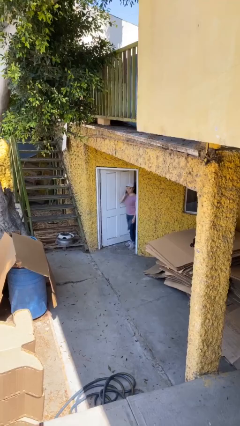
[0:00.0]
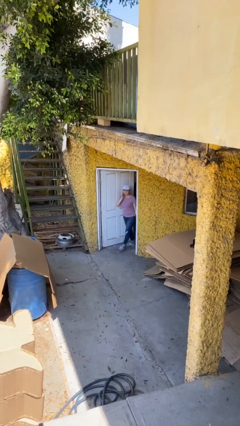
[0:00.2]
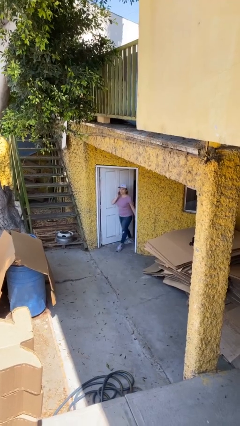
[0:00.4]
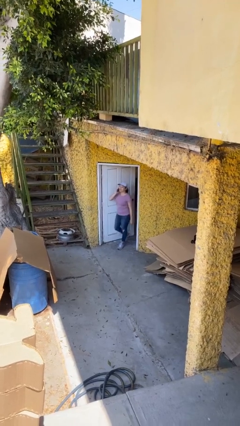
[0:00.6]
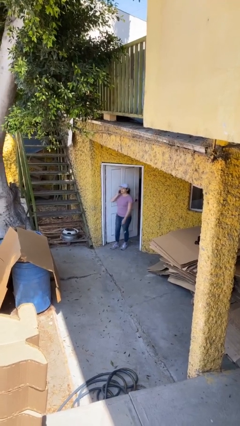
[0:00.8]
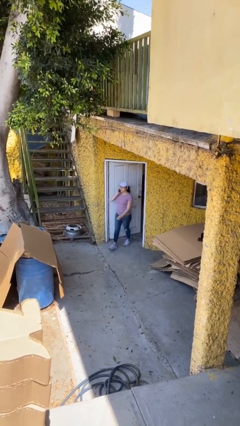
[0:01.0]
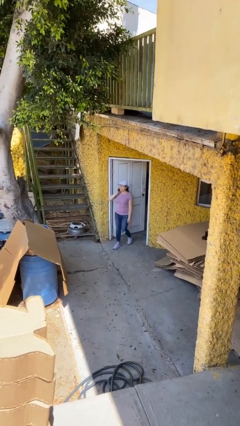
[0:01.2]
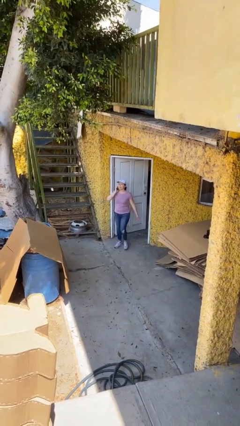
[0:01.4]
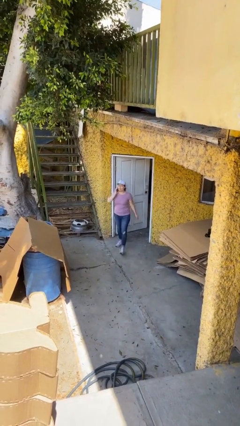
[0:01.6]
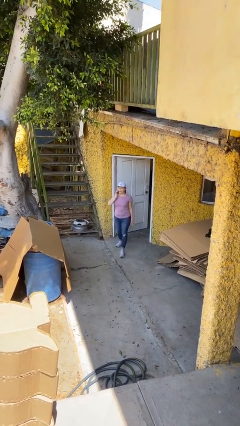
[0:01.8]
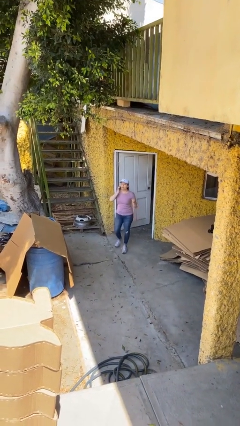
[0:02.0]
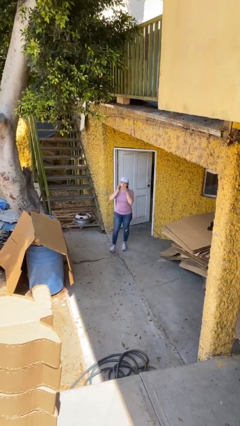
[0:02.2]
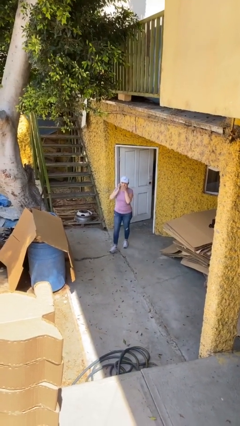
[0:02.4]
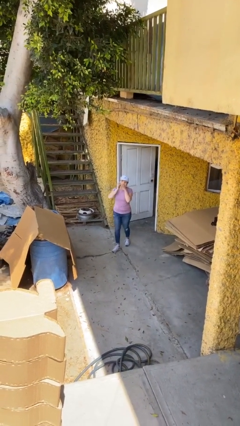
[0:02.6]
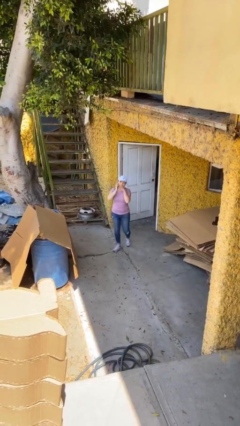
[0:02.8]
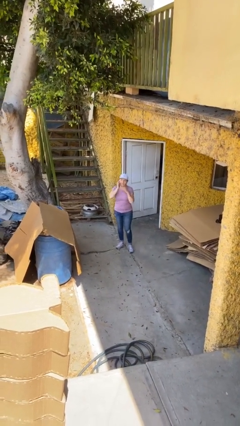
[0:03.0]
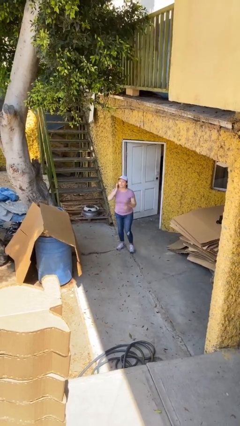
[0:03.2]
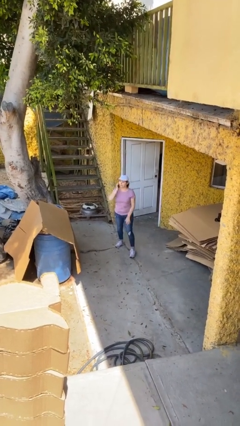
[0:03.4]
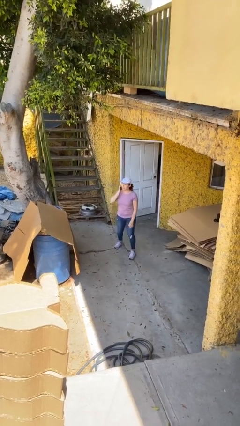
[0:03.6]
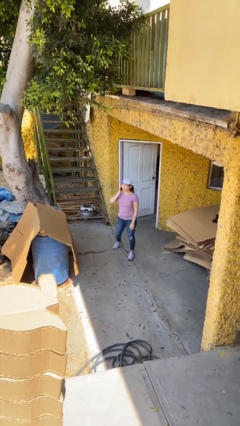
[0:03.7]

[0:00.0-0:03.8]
person enters scene through structure

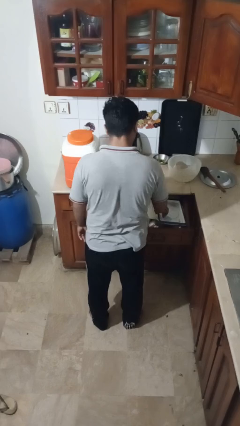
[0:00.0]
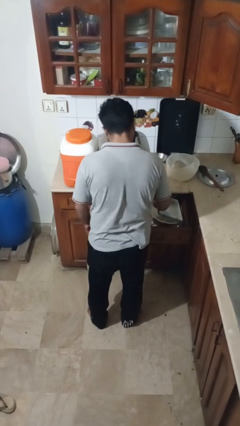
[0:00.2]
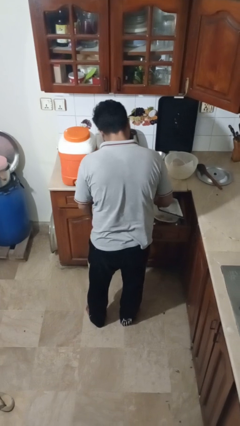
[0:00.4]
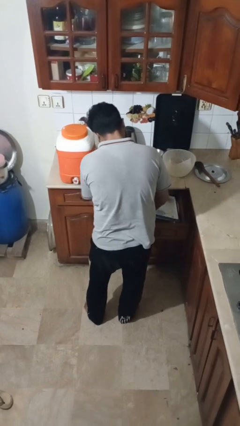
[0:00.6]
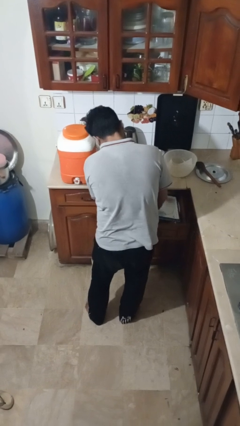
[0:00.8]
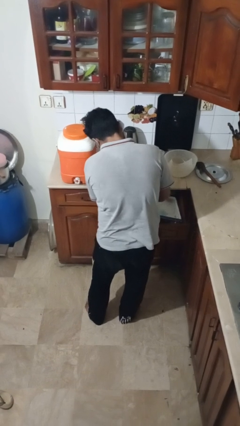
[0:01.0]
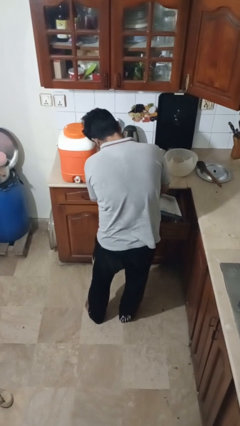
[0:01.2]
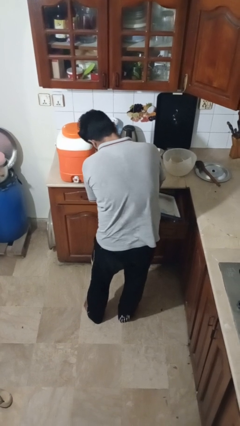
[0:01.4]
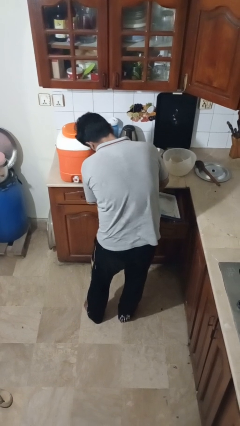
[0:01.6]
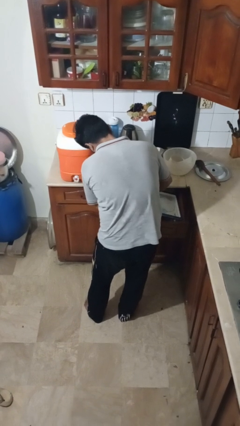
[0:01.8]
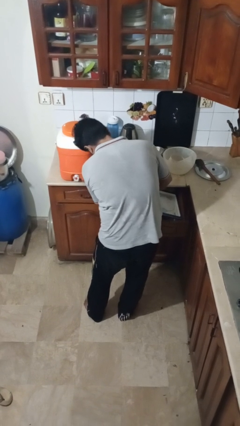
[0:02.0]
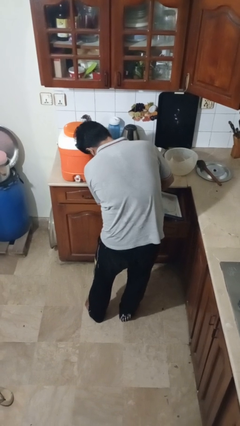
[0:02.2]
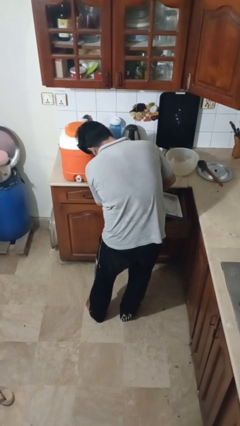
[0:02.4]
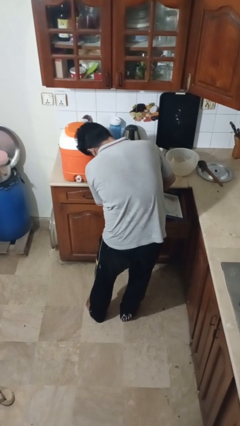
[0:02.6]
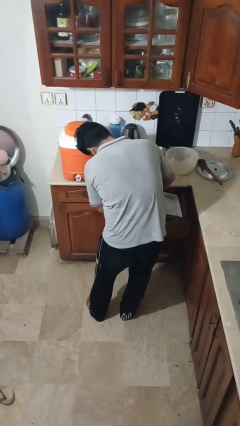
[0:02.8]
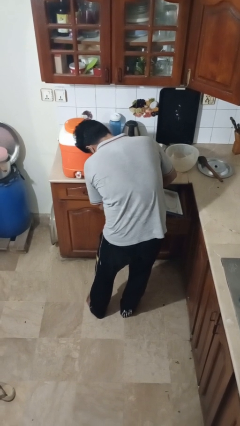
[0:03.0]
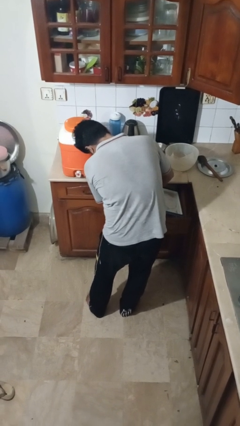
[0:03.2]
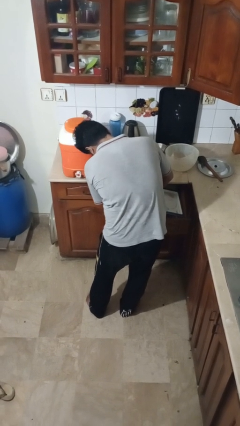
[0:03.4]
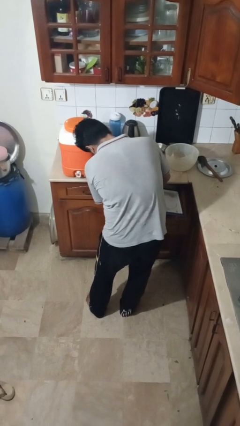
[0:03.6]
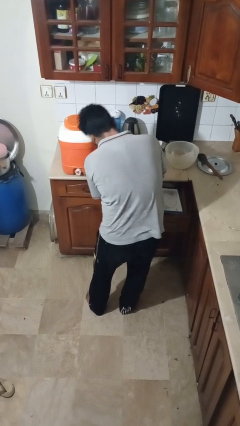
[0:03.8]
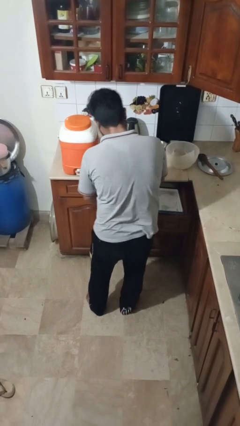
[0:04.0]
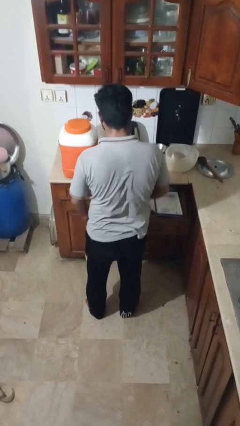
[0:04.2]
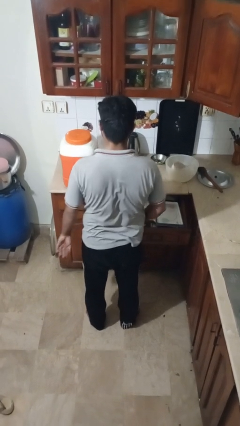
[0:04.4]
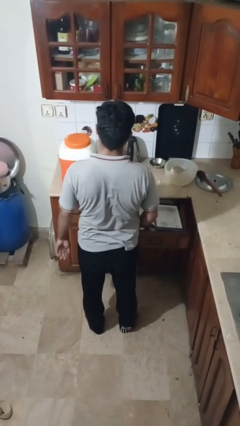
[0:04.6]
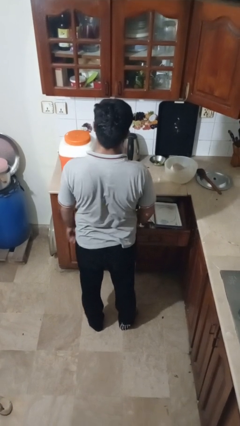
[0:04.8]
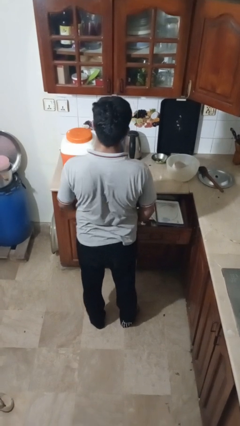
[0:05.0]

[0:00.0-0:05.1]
person searches in kitchen drawer

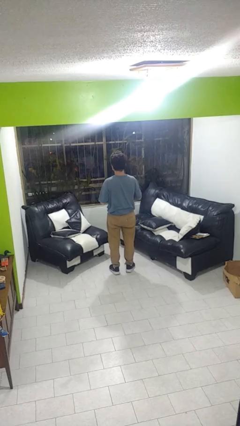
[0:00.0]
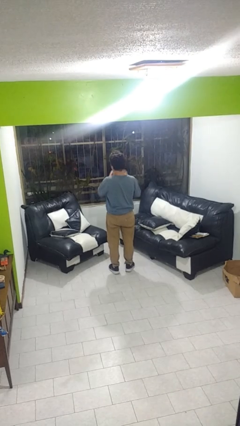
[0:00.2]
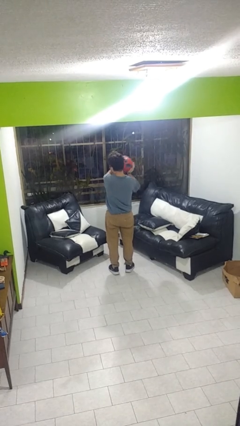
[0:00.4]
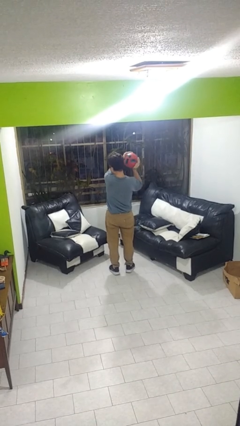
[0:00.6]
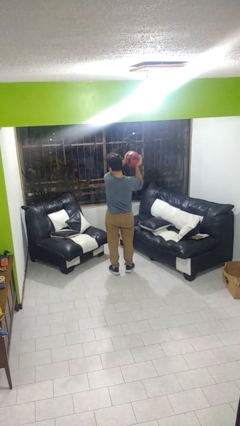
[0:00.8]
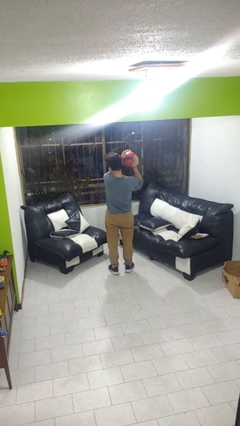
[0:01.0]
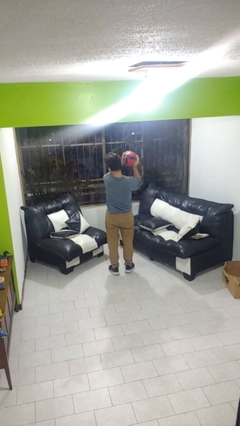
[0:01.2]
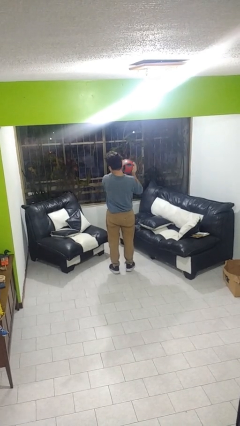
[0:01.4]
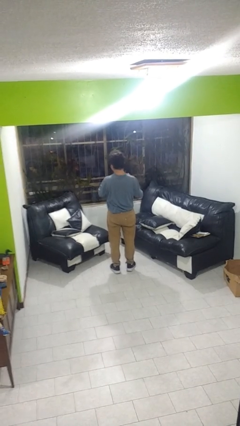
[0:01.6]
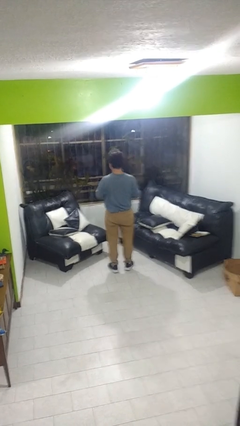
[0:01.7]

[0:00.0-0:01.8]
person squeezes object

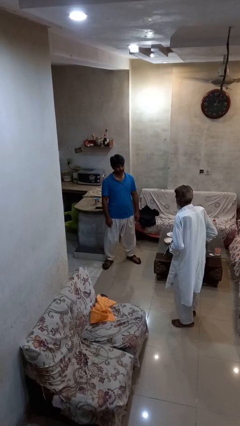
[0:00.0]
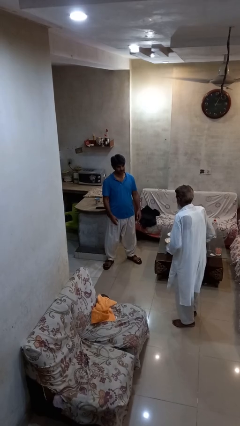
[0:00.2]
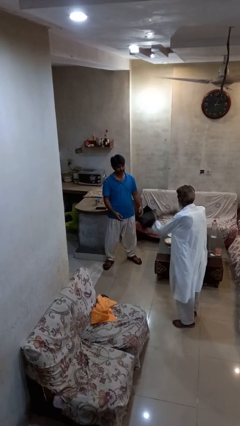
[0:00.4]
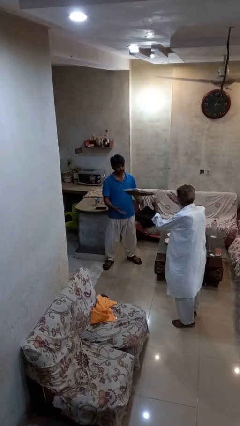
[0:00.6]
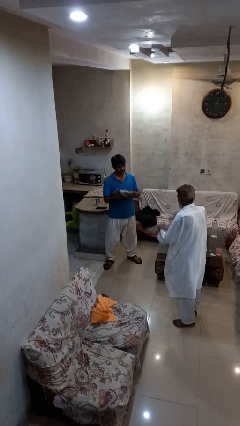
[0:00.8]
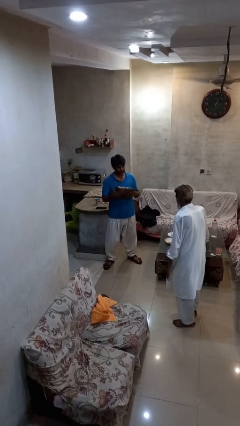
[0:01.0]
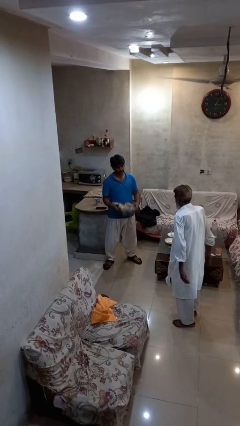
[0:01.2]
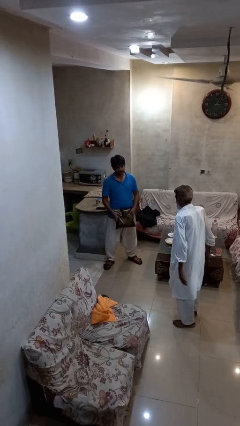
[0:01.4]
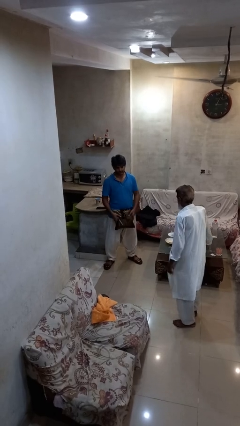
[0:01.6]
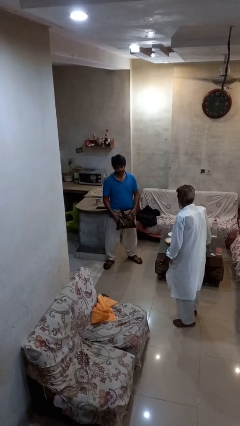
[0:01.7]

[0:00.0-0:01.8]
person catches object from person

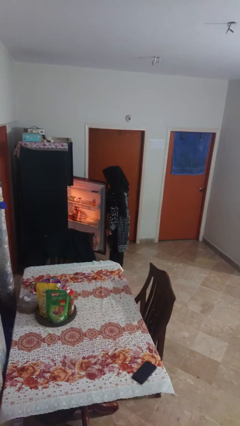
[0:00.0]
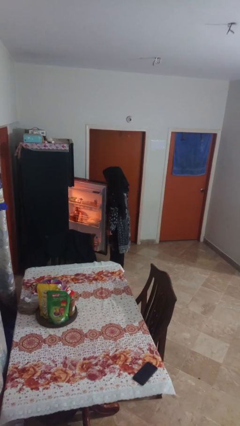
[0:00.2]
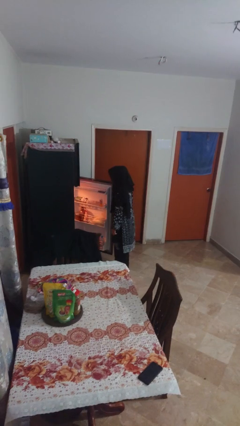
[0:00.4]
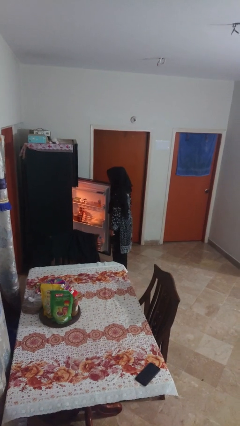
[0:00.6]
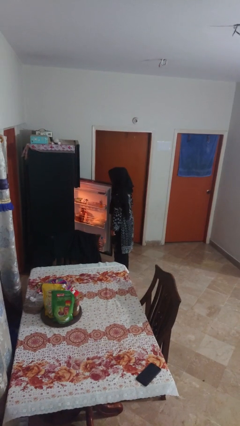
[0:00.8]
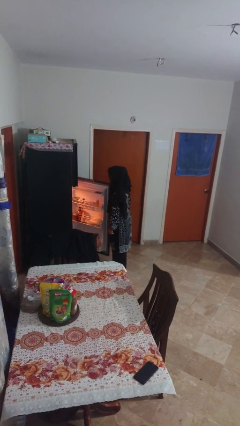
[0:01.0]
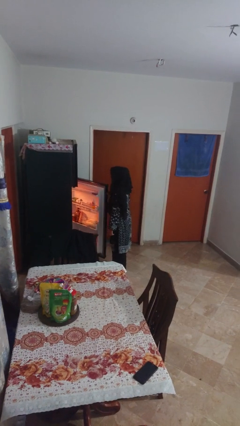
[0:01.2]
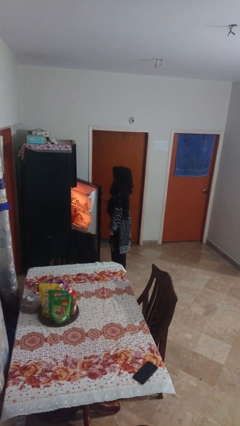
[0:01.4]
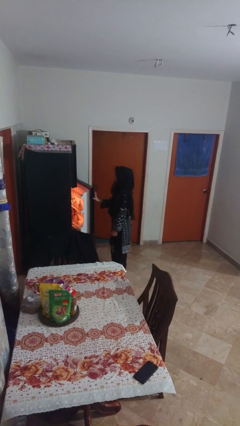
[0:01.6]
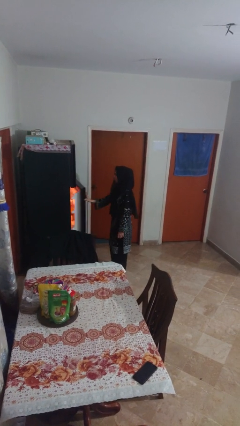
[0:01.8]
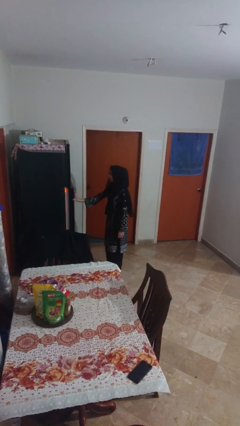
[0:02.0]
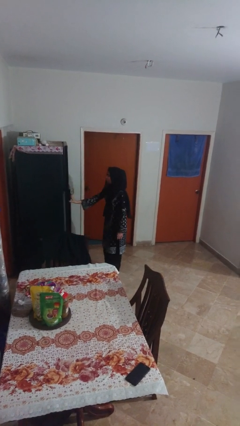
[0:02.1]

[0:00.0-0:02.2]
person closes refrigerator

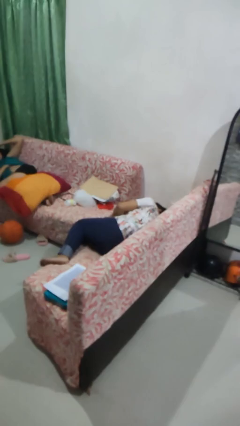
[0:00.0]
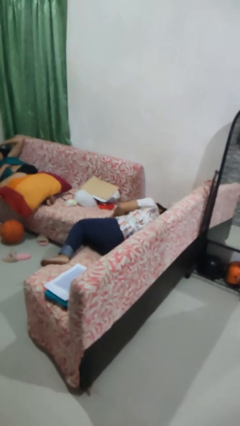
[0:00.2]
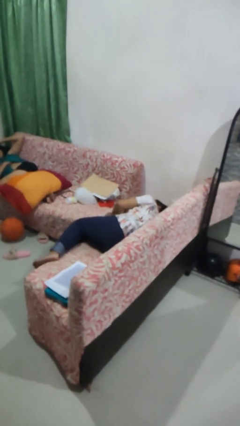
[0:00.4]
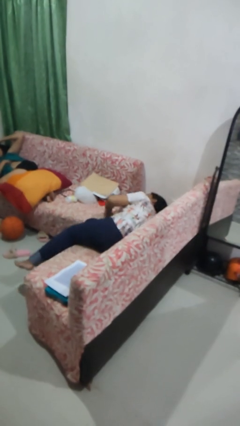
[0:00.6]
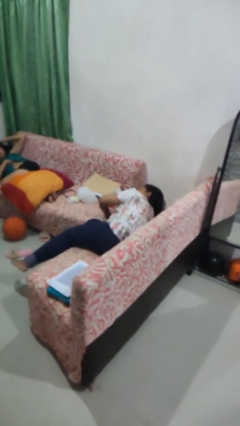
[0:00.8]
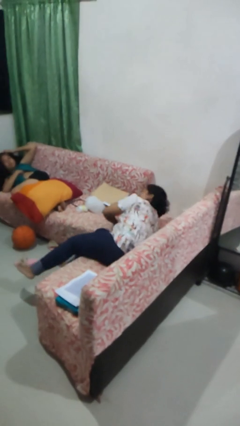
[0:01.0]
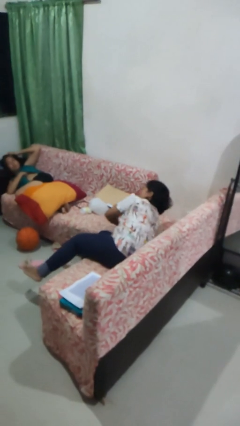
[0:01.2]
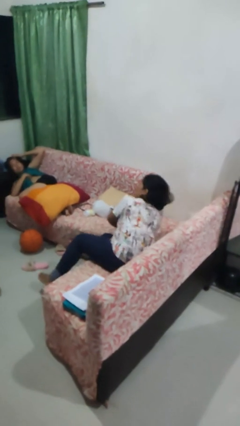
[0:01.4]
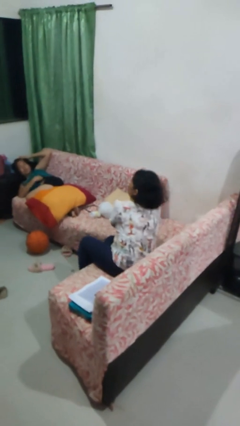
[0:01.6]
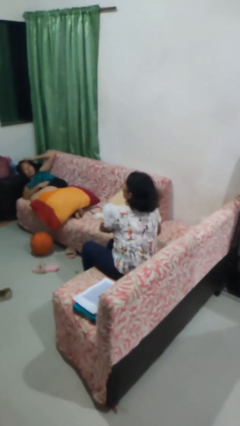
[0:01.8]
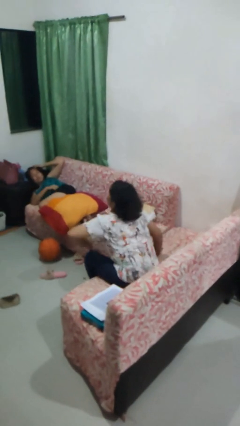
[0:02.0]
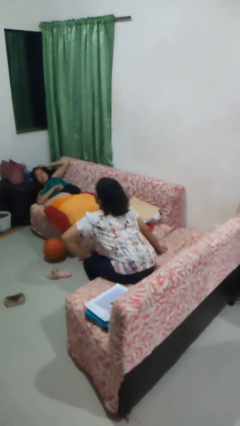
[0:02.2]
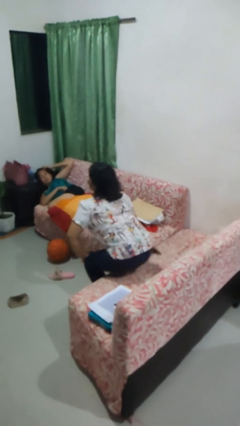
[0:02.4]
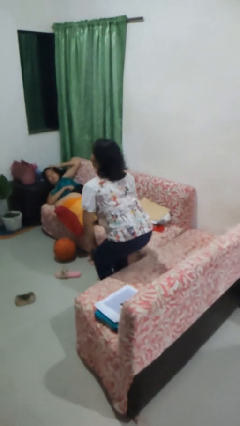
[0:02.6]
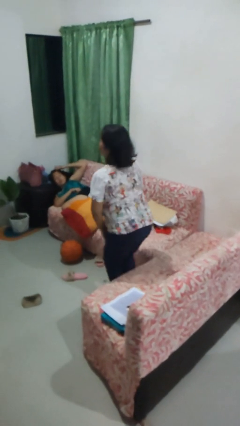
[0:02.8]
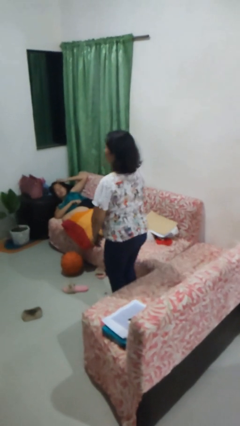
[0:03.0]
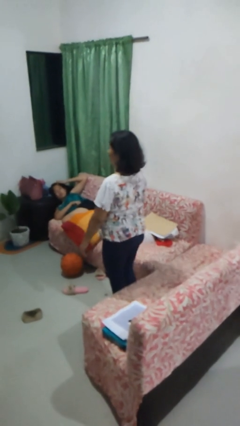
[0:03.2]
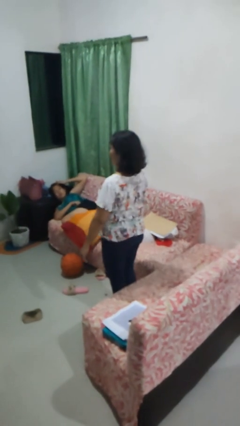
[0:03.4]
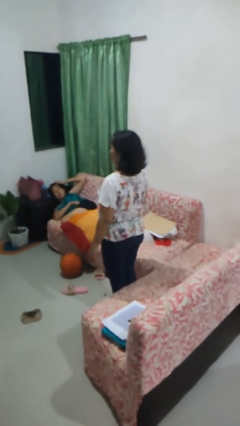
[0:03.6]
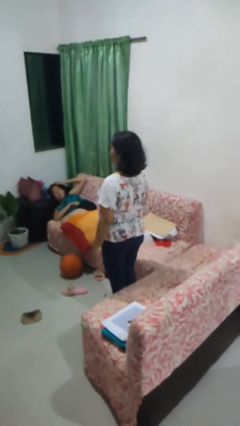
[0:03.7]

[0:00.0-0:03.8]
person stands up
